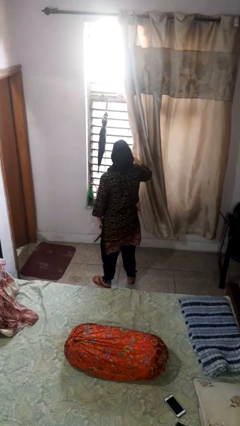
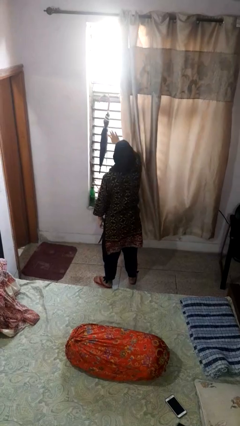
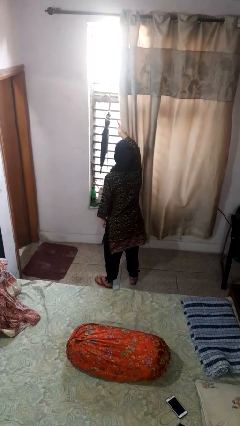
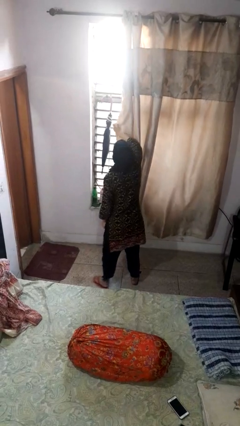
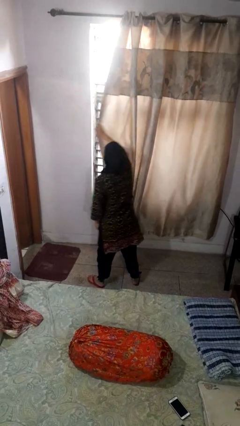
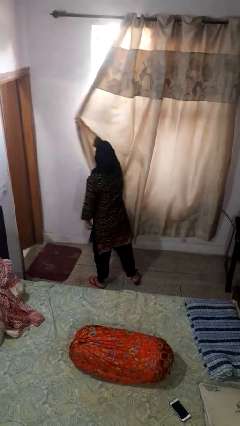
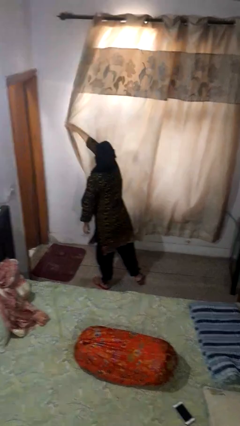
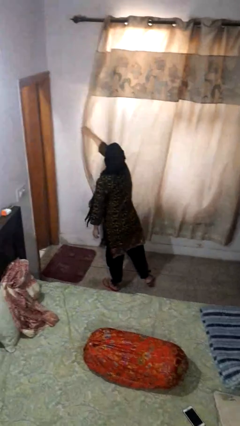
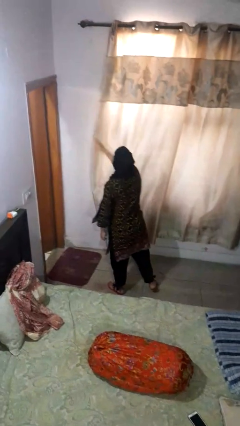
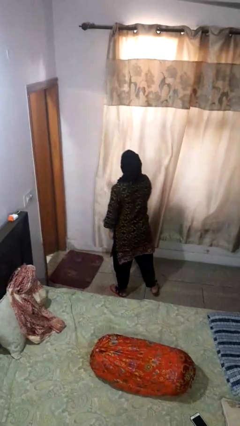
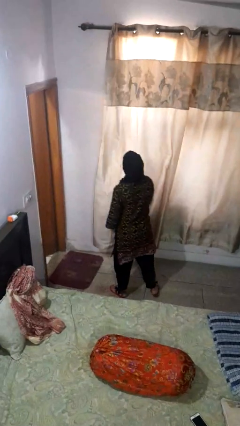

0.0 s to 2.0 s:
person closes curtains

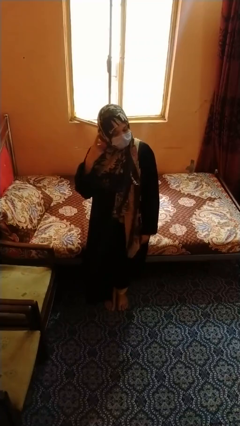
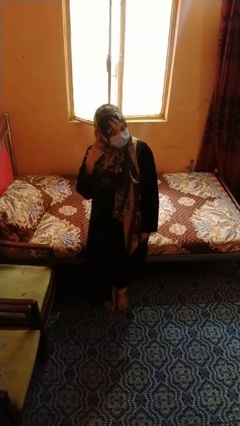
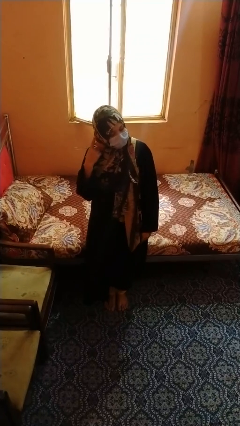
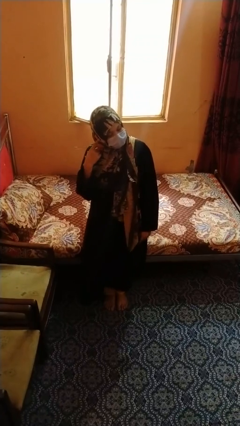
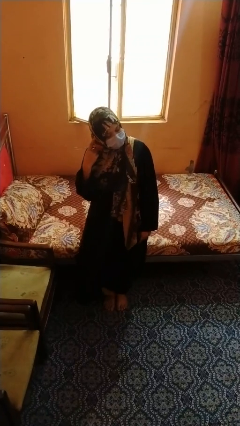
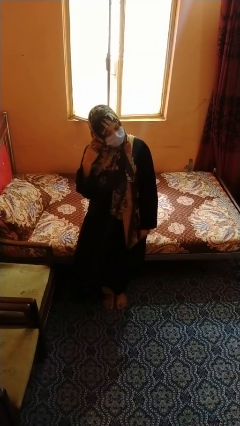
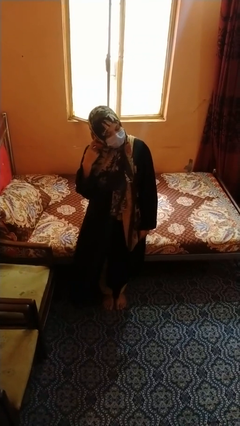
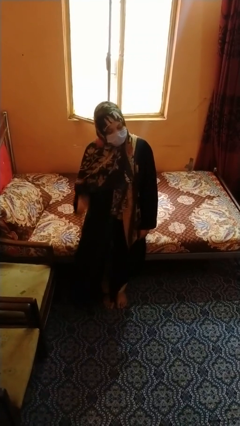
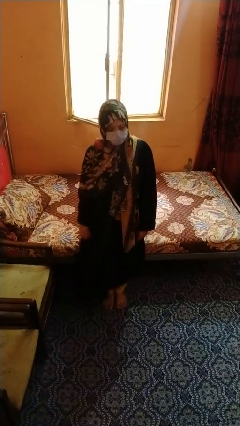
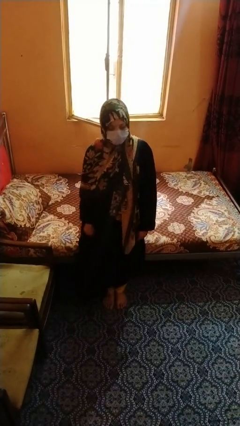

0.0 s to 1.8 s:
person gestures listen closely

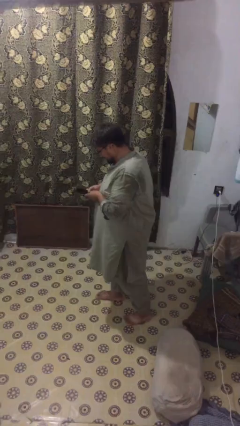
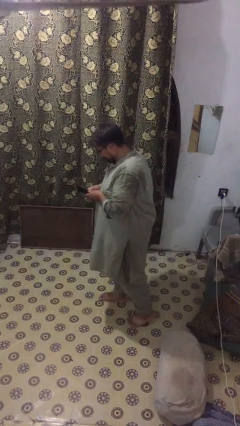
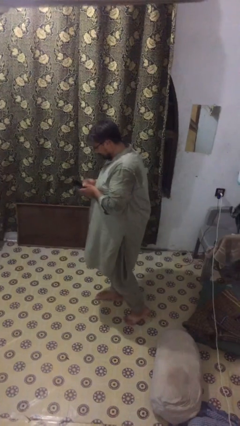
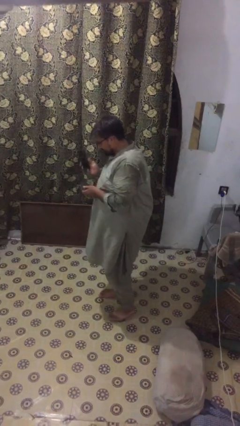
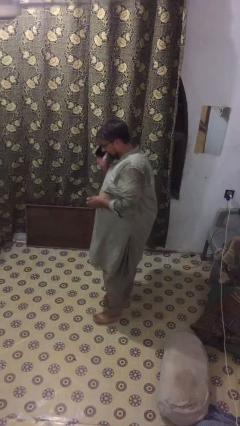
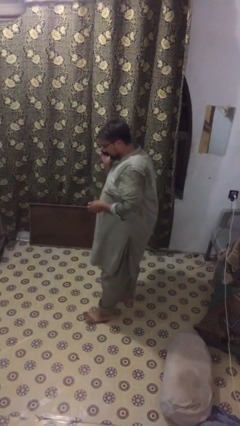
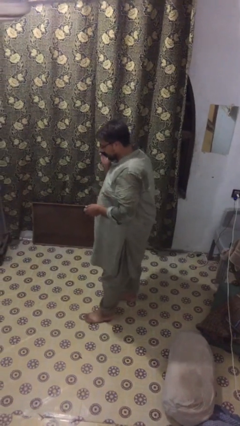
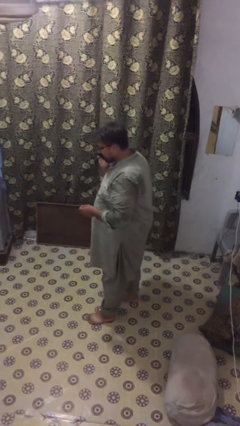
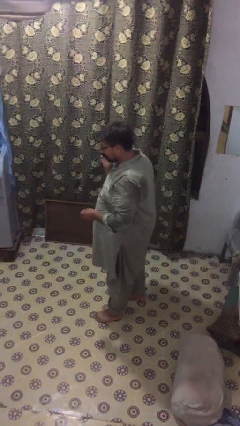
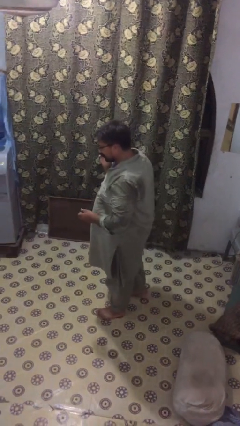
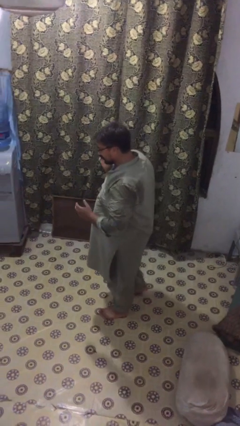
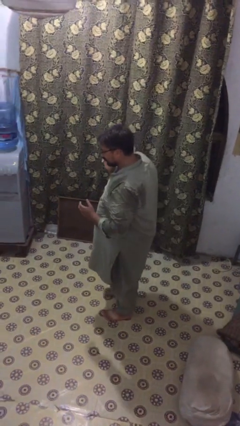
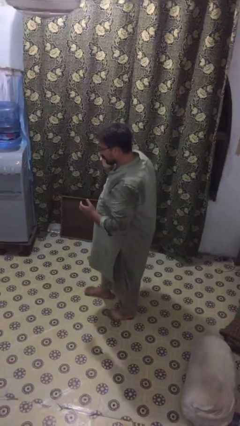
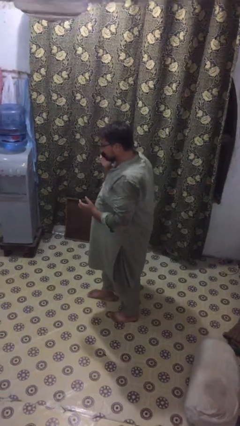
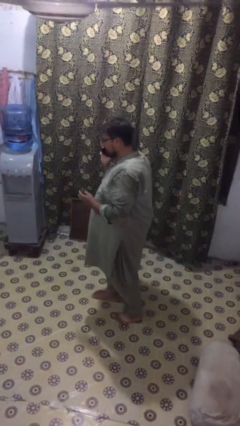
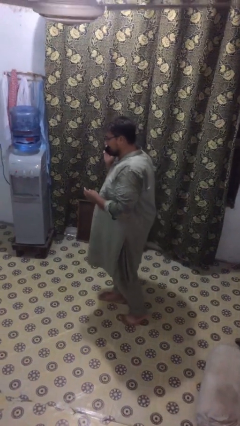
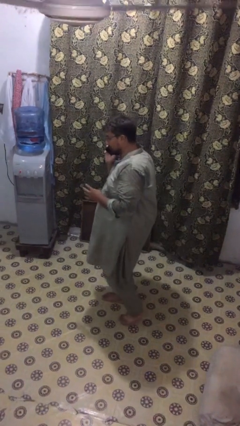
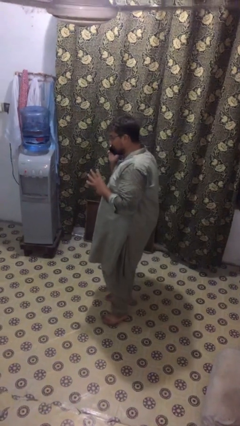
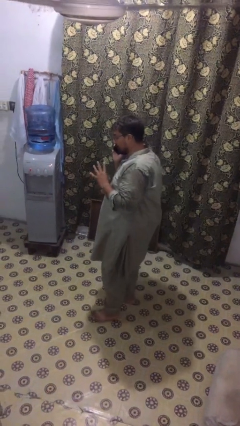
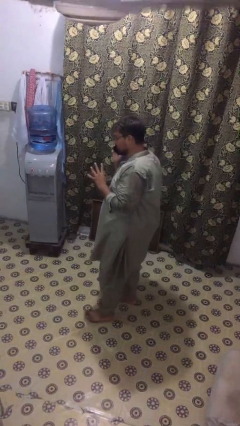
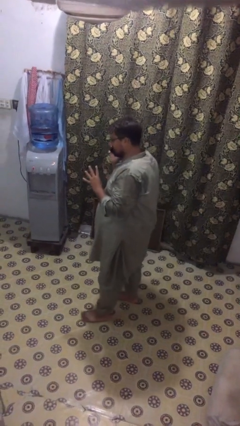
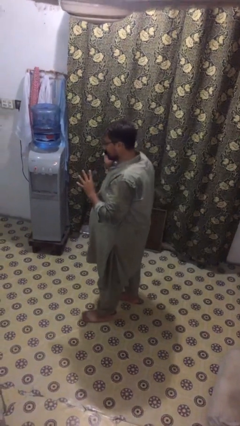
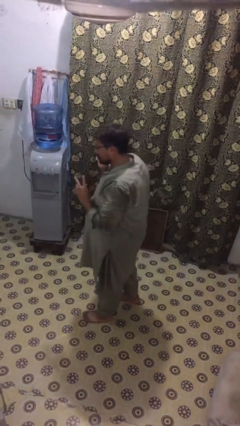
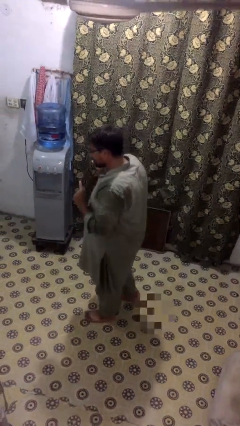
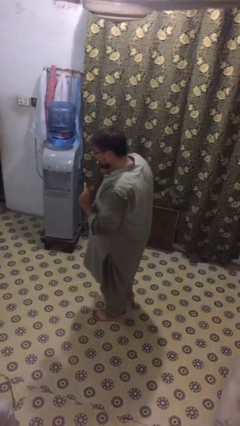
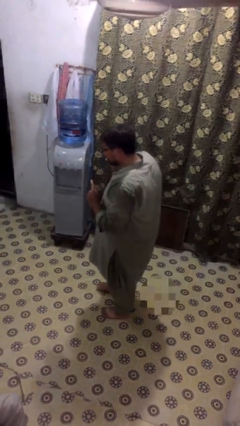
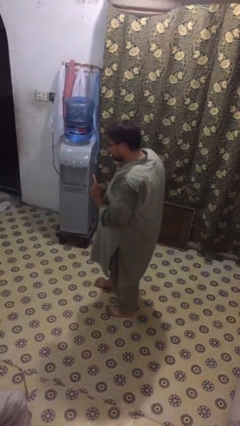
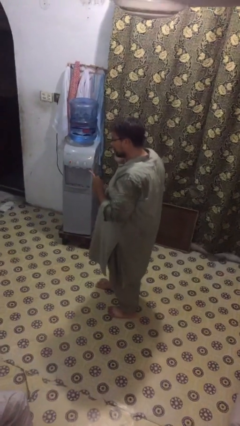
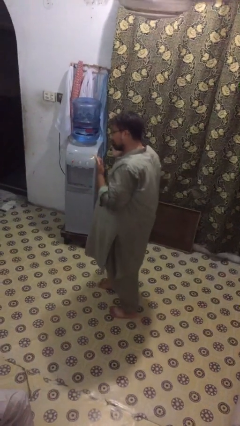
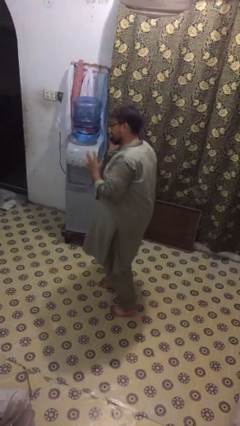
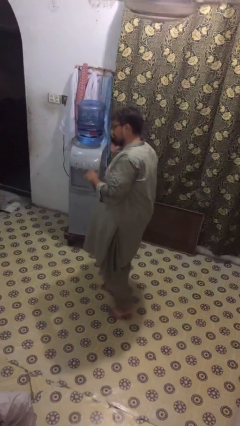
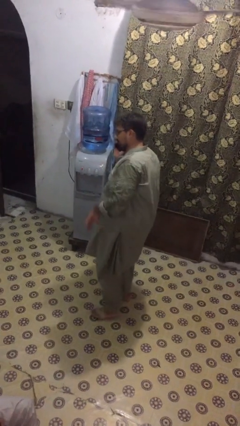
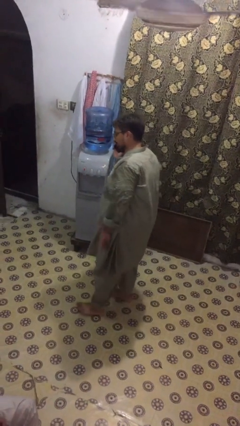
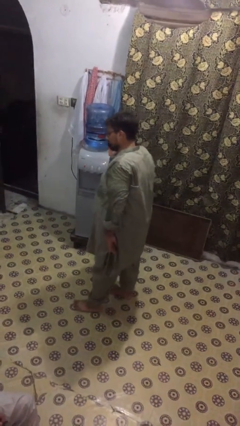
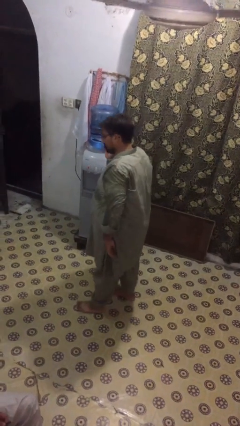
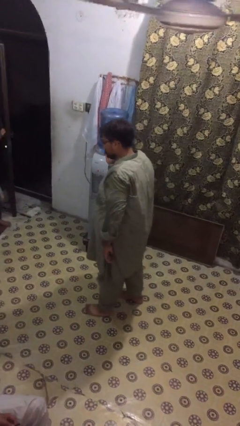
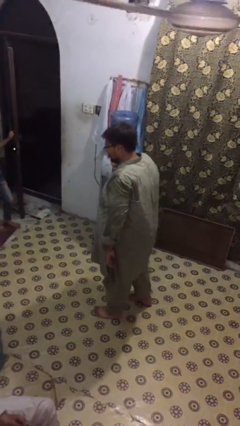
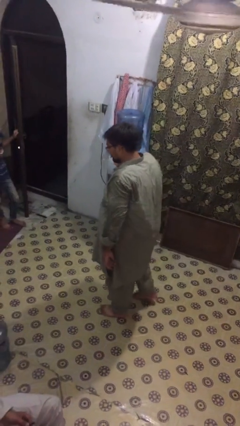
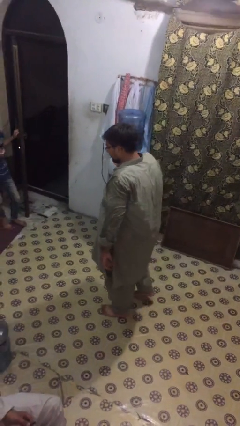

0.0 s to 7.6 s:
person talks on phone

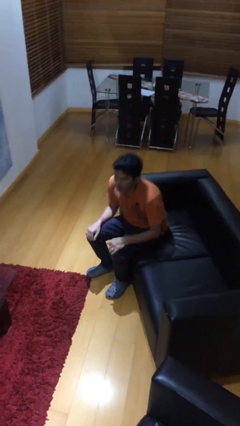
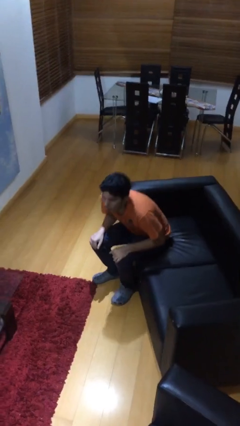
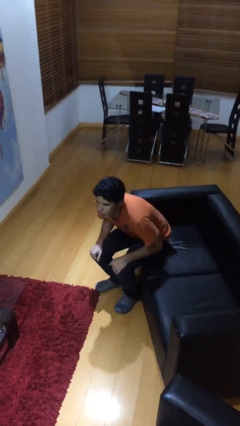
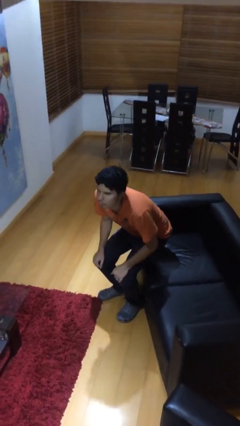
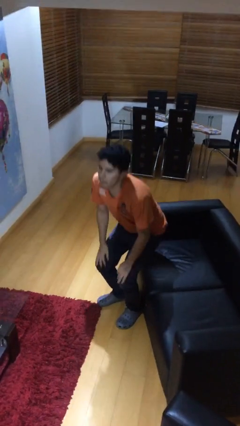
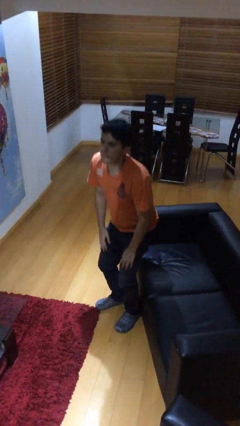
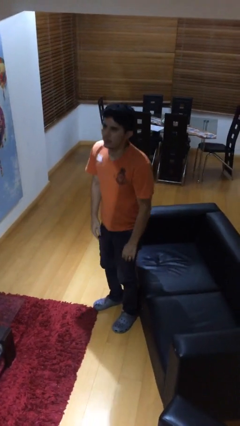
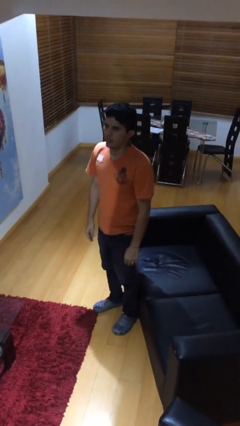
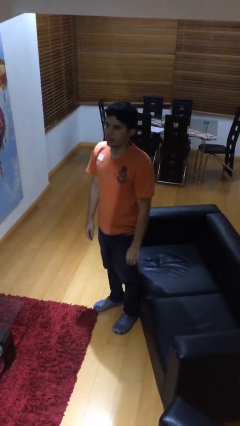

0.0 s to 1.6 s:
person stands up

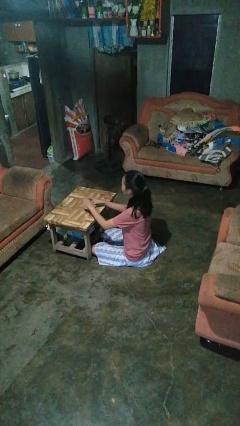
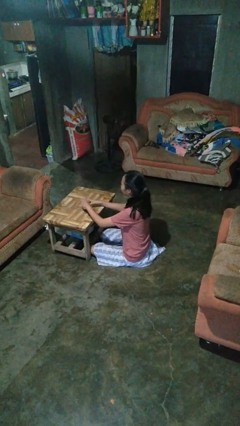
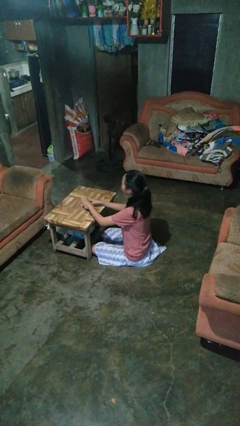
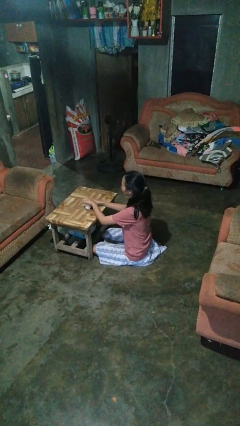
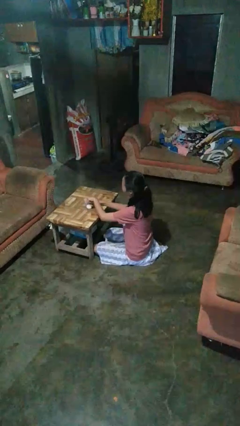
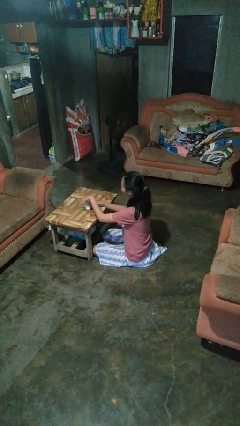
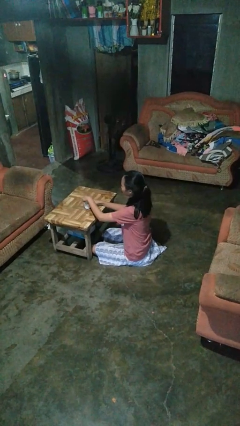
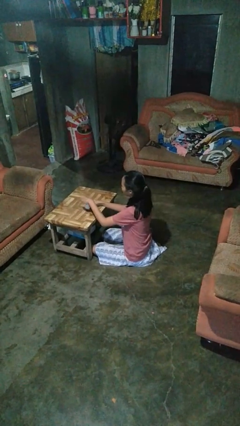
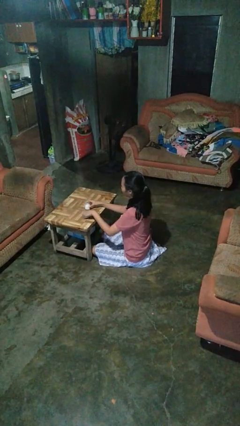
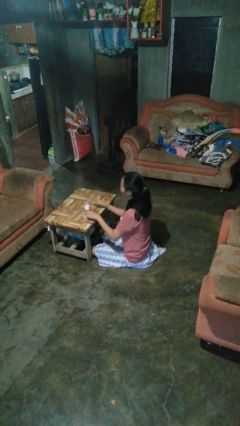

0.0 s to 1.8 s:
person opens jar

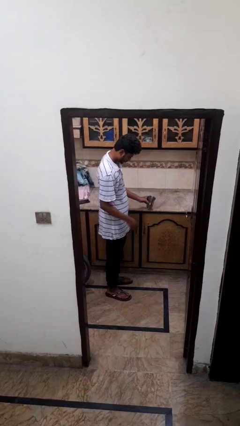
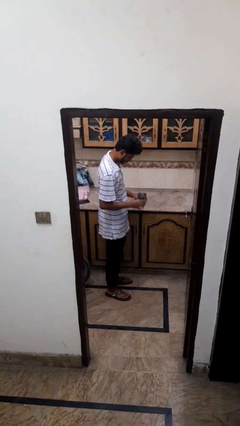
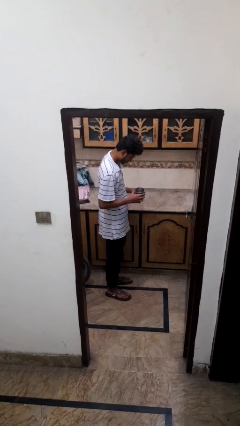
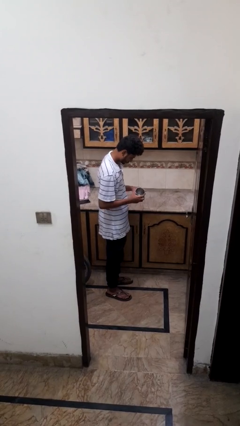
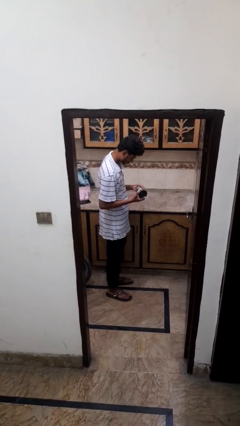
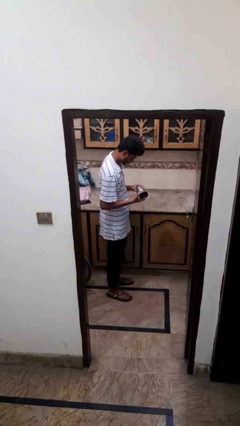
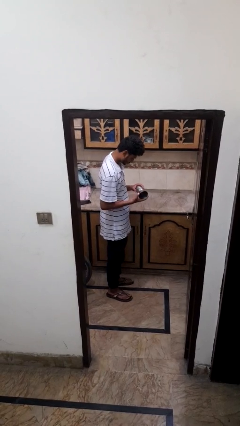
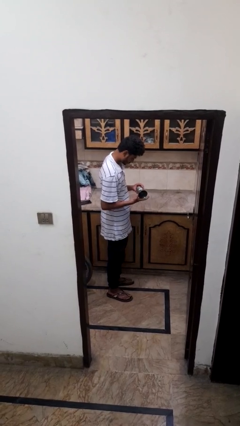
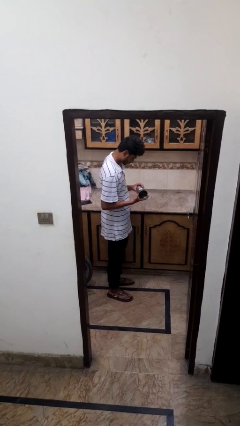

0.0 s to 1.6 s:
person picks up object from countertop

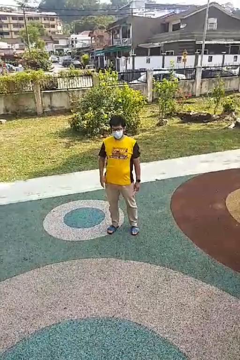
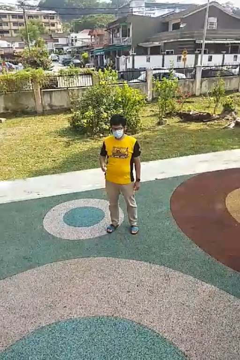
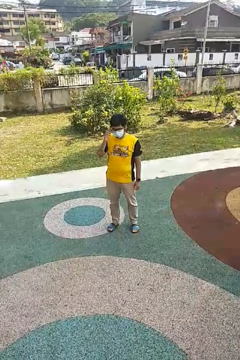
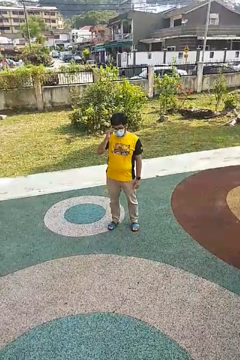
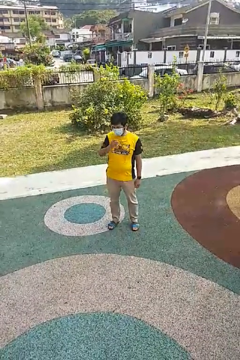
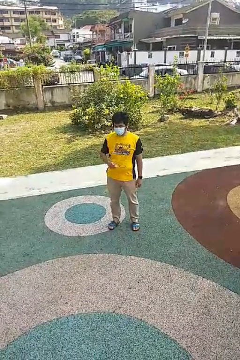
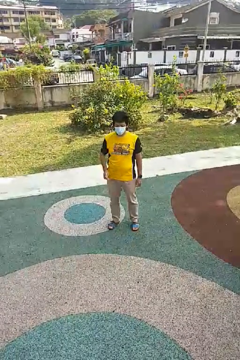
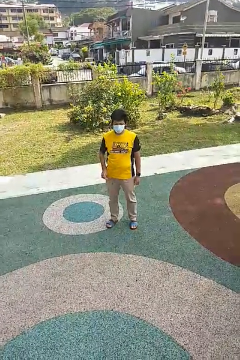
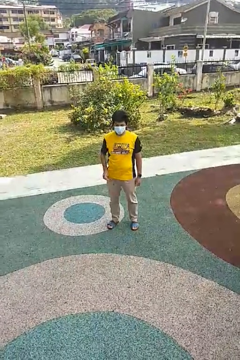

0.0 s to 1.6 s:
person takes off glasses
